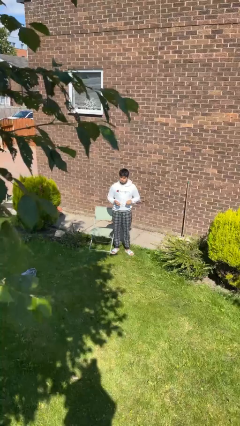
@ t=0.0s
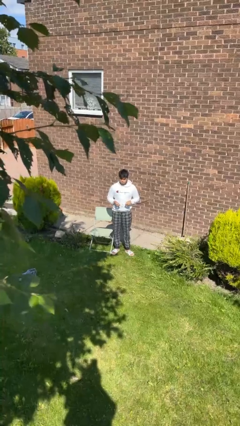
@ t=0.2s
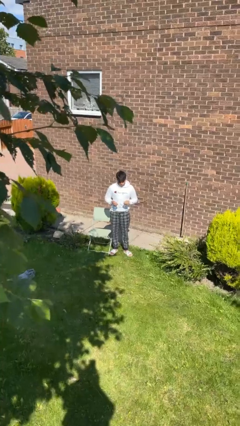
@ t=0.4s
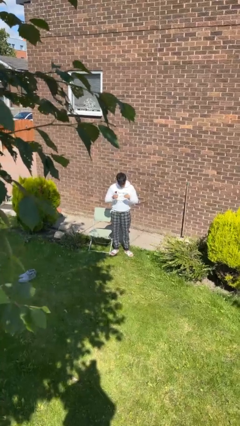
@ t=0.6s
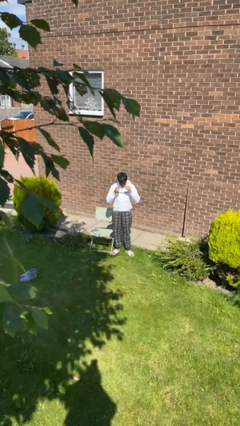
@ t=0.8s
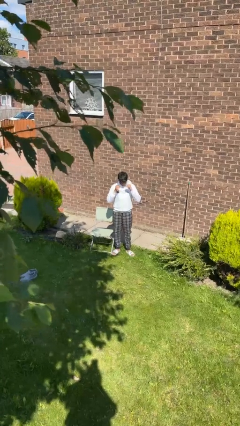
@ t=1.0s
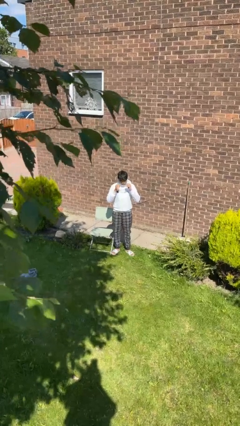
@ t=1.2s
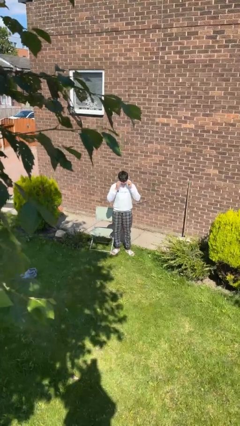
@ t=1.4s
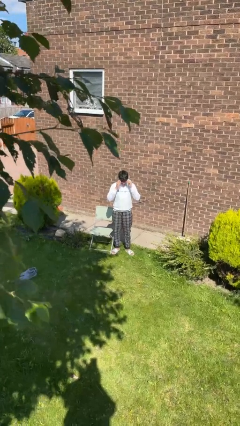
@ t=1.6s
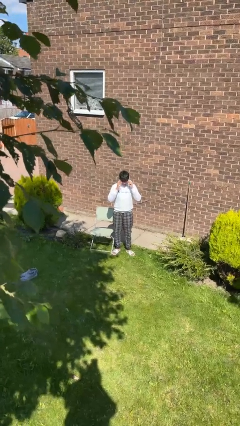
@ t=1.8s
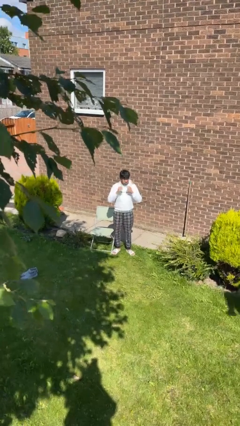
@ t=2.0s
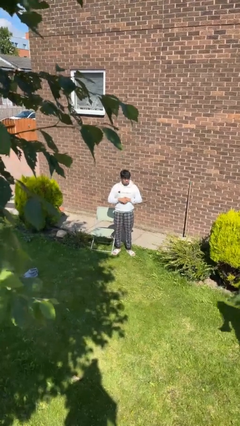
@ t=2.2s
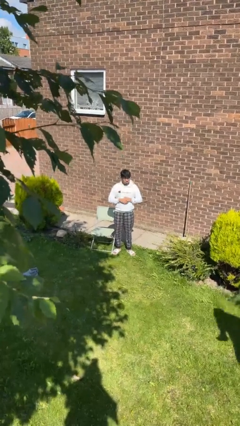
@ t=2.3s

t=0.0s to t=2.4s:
person puts on glasses

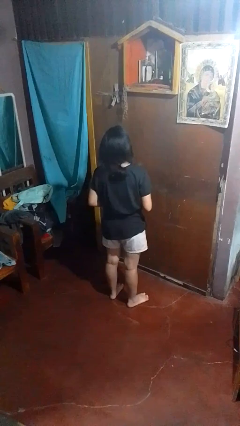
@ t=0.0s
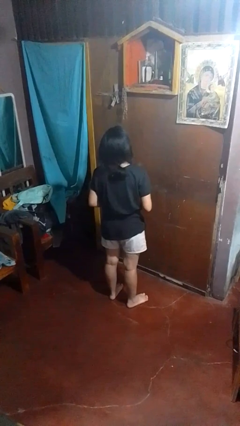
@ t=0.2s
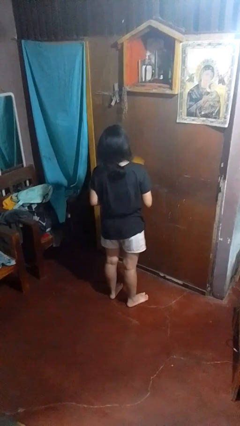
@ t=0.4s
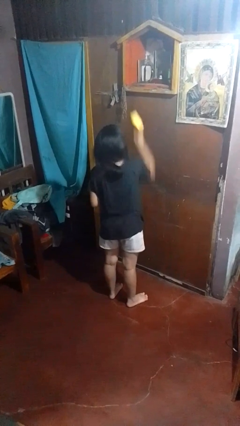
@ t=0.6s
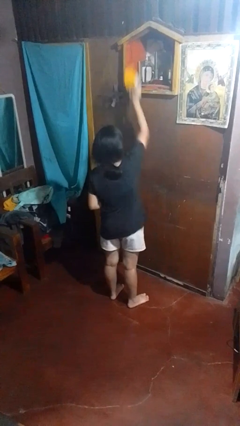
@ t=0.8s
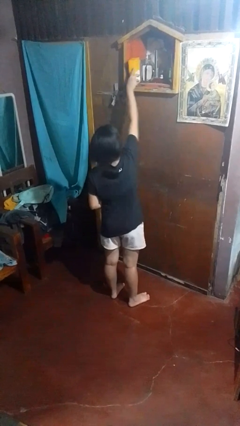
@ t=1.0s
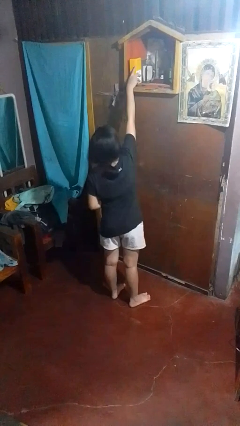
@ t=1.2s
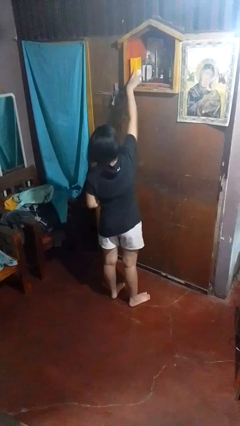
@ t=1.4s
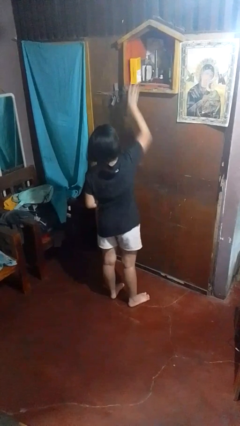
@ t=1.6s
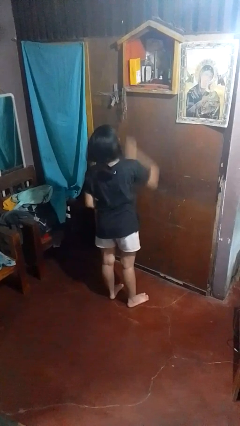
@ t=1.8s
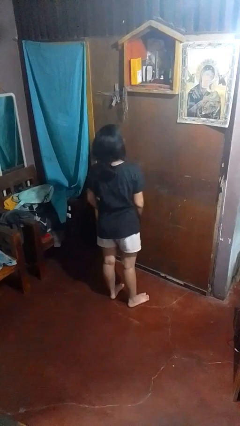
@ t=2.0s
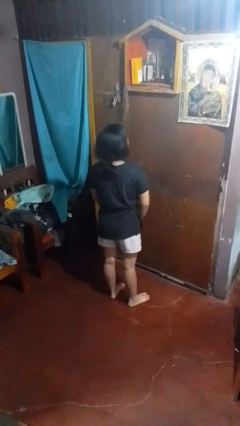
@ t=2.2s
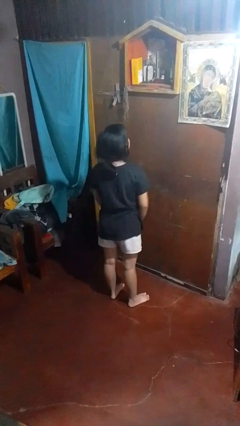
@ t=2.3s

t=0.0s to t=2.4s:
person puts down object on shelf

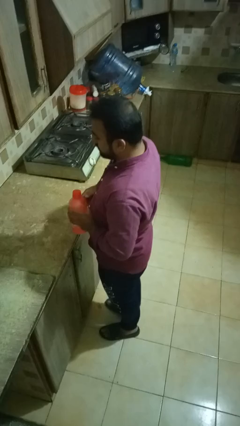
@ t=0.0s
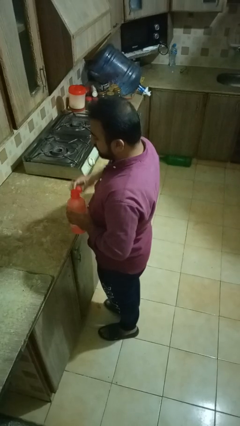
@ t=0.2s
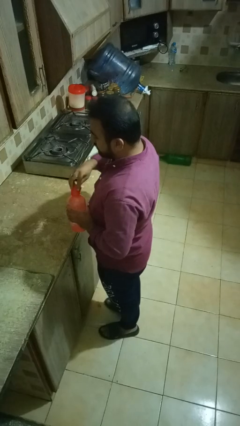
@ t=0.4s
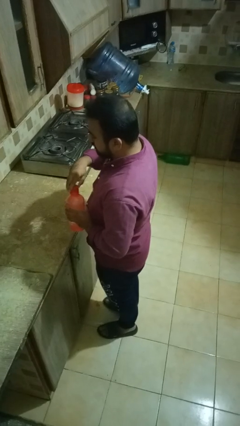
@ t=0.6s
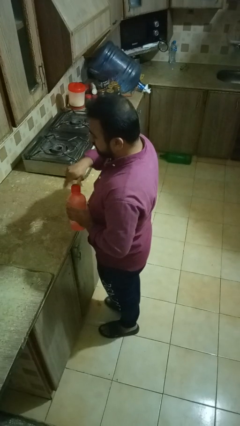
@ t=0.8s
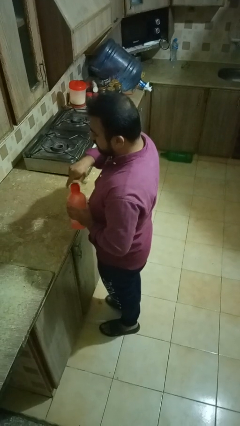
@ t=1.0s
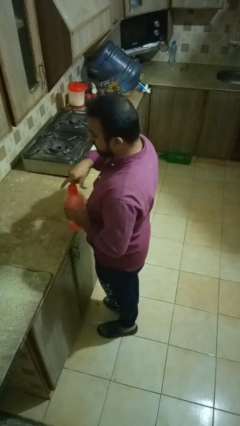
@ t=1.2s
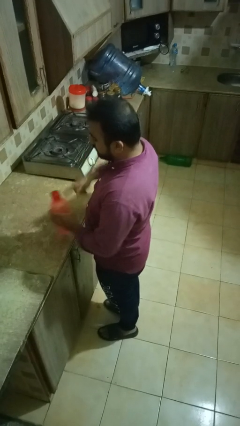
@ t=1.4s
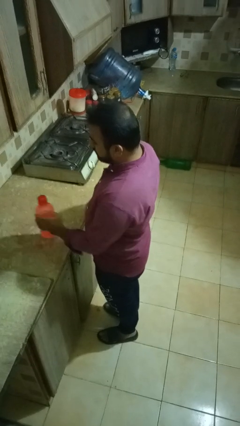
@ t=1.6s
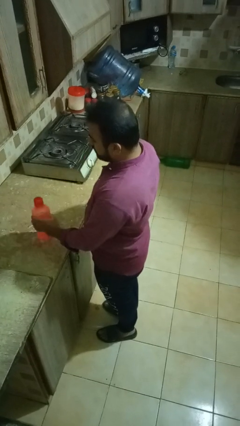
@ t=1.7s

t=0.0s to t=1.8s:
person screws lid to bottle

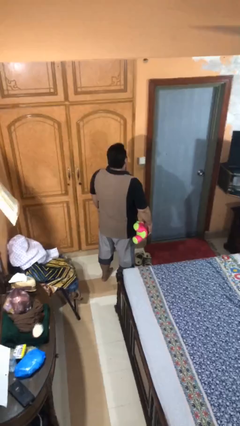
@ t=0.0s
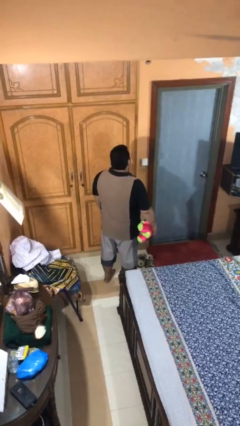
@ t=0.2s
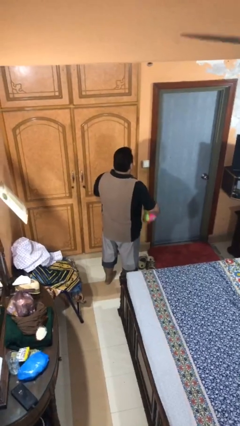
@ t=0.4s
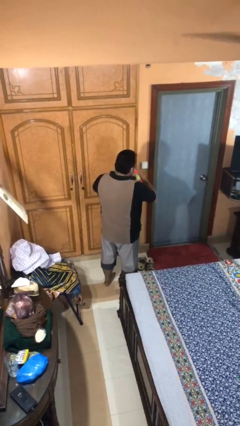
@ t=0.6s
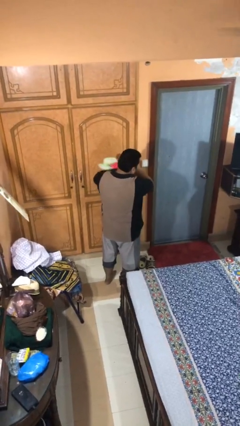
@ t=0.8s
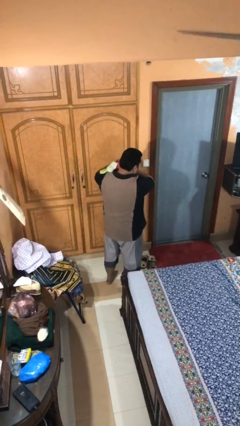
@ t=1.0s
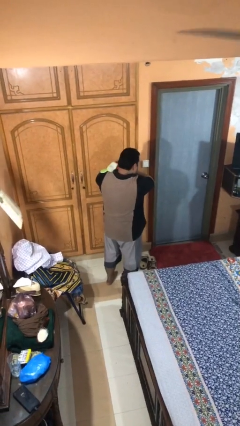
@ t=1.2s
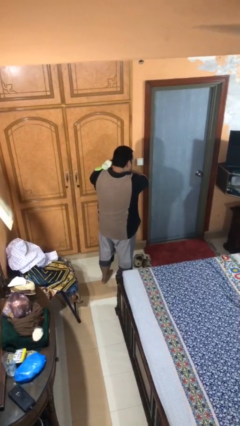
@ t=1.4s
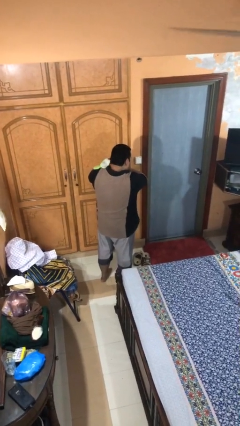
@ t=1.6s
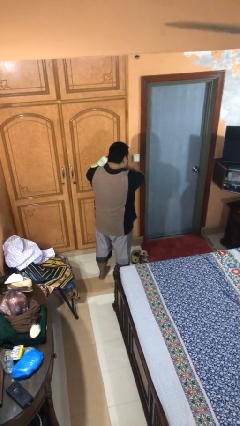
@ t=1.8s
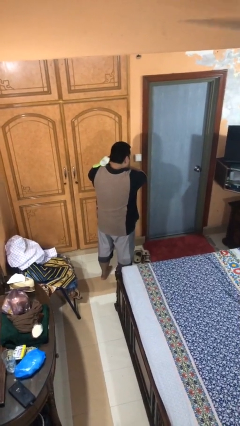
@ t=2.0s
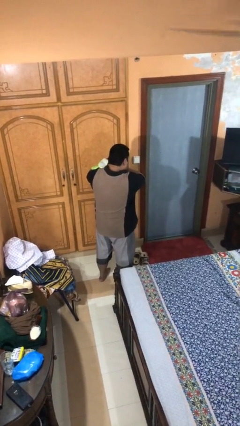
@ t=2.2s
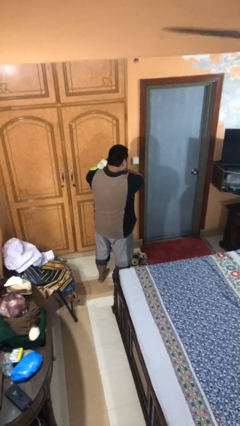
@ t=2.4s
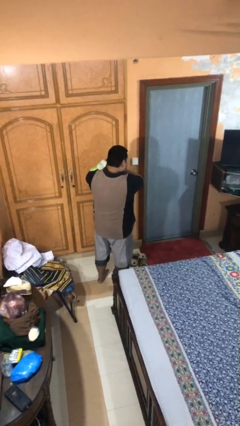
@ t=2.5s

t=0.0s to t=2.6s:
person hugs stuffed animal

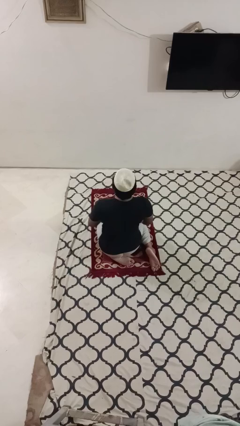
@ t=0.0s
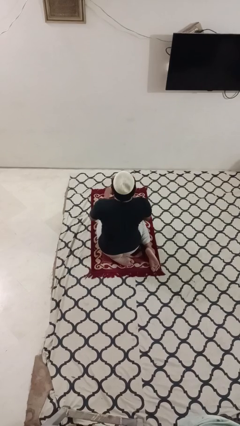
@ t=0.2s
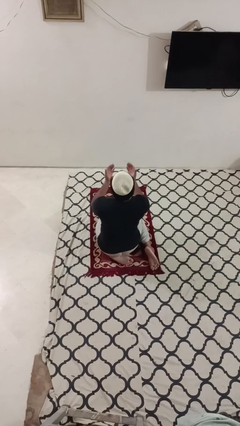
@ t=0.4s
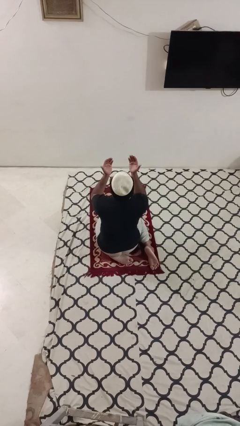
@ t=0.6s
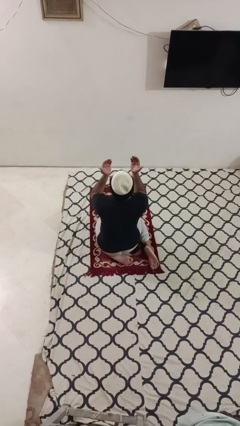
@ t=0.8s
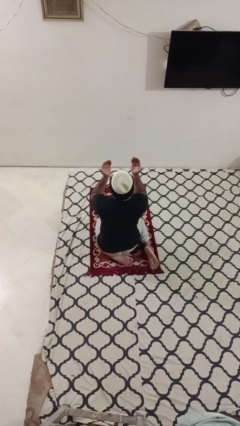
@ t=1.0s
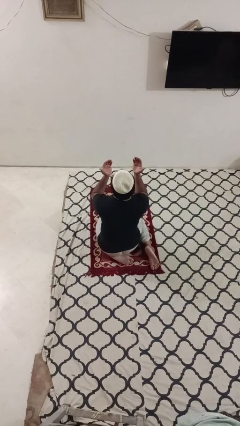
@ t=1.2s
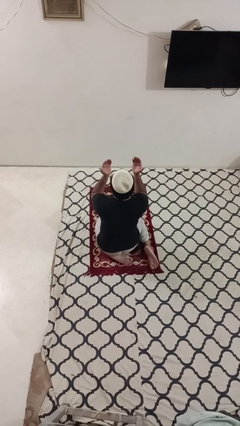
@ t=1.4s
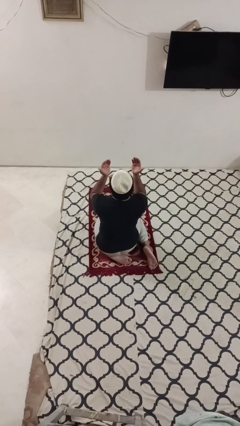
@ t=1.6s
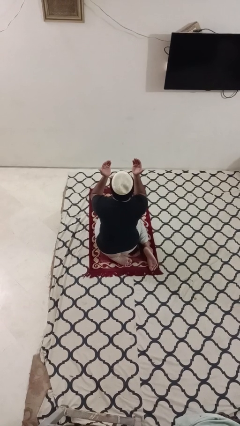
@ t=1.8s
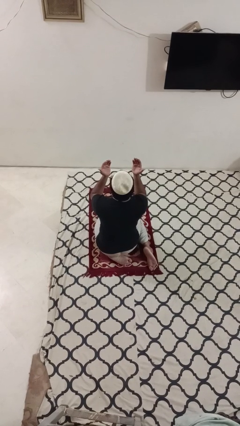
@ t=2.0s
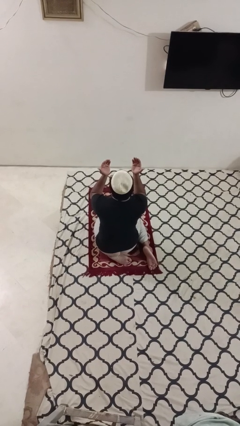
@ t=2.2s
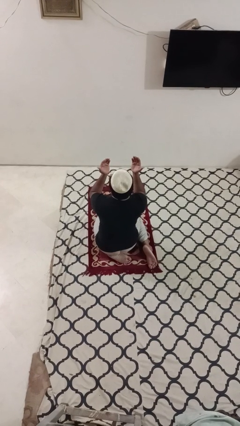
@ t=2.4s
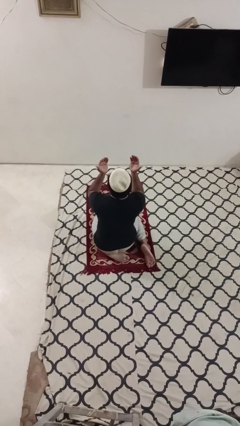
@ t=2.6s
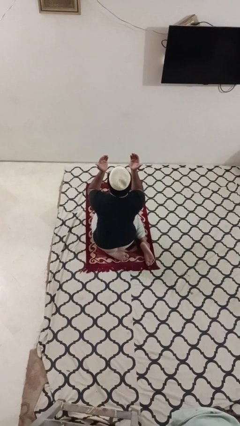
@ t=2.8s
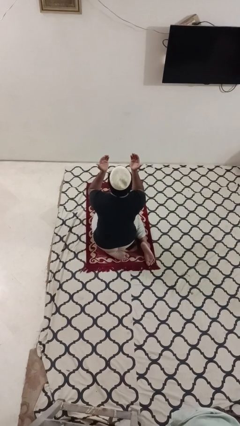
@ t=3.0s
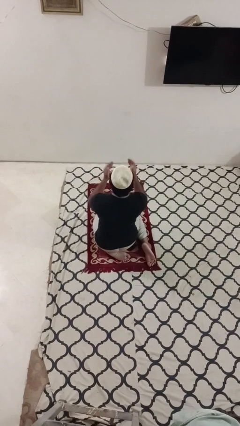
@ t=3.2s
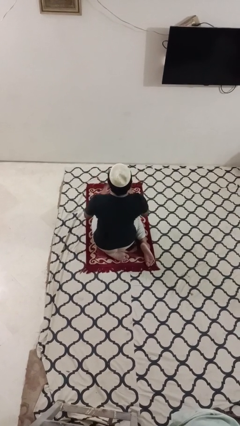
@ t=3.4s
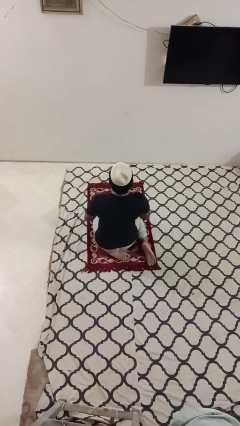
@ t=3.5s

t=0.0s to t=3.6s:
person prays

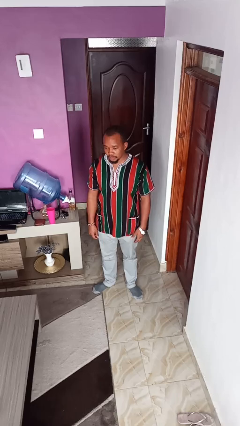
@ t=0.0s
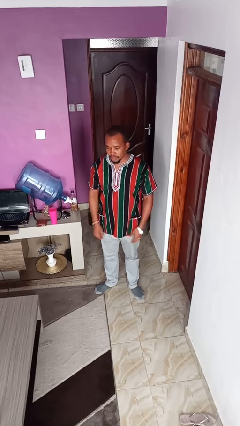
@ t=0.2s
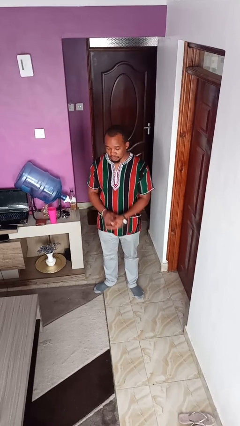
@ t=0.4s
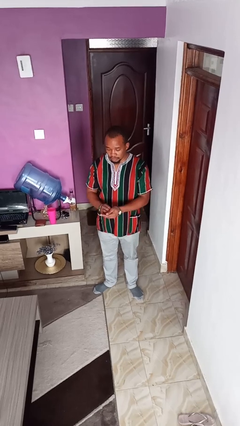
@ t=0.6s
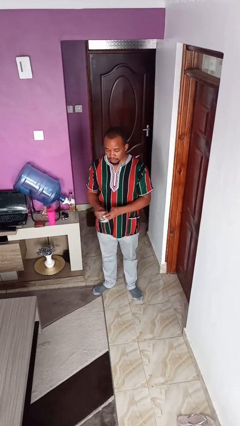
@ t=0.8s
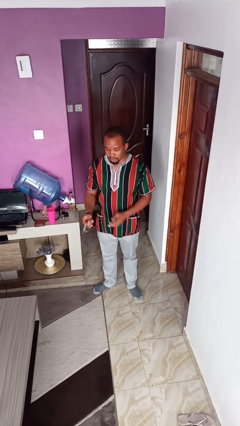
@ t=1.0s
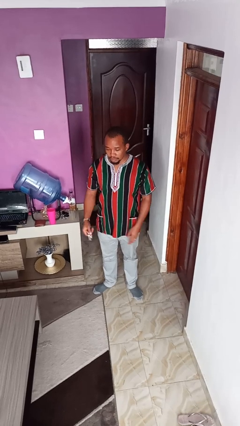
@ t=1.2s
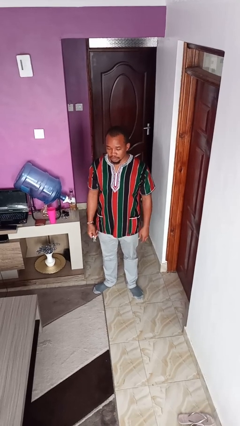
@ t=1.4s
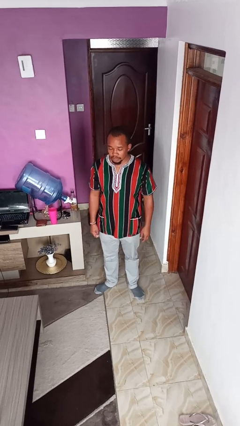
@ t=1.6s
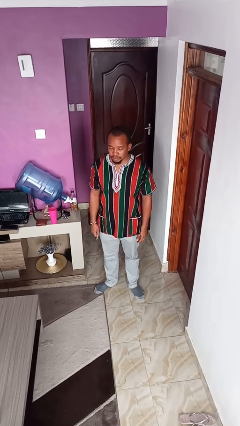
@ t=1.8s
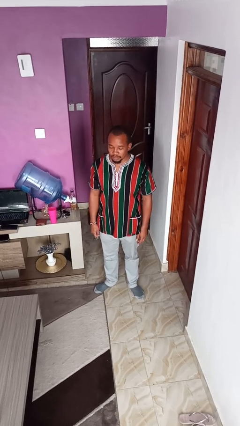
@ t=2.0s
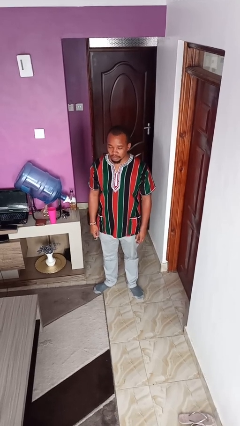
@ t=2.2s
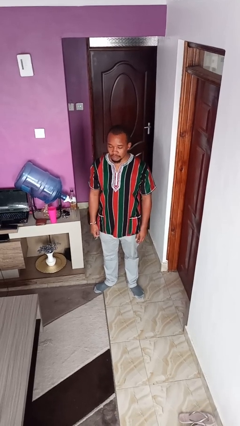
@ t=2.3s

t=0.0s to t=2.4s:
person takes off wristwatch

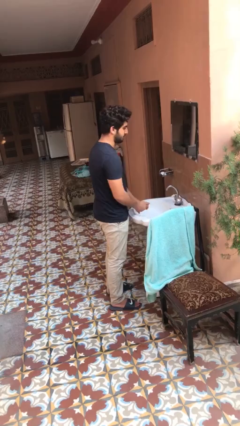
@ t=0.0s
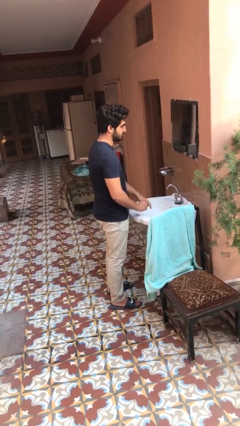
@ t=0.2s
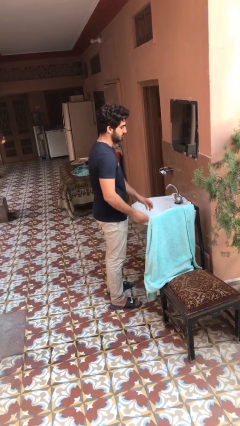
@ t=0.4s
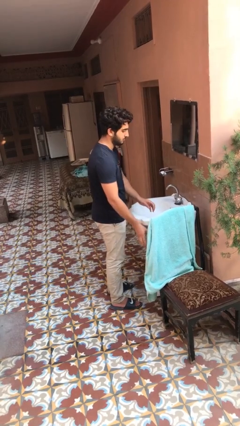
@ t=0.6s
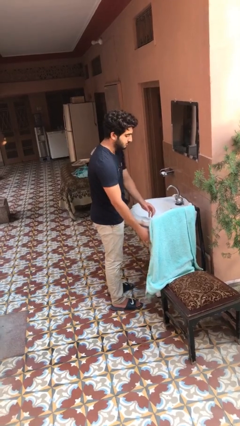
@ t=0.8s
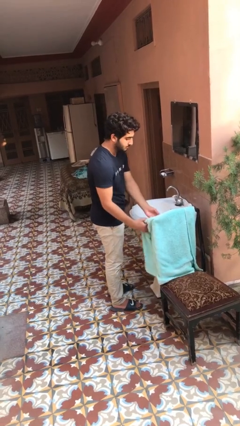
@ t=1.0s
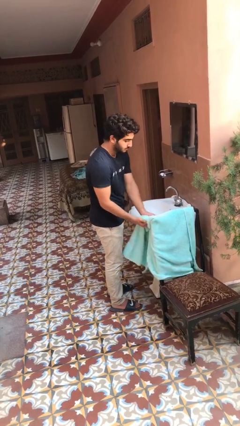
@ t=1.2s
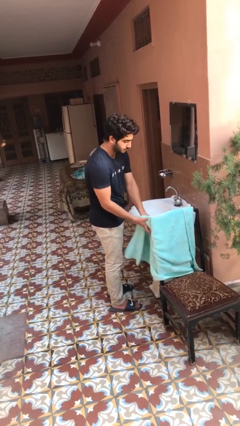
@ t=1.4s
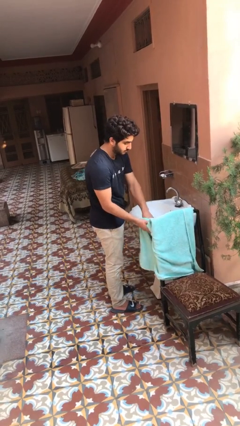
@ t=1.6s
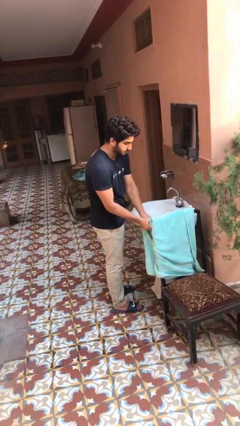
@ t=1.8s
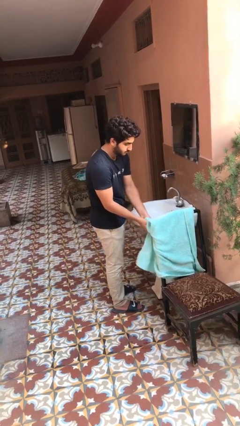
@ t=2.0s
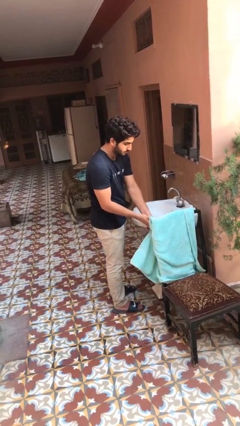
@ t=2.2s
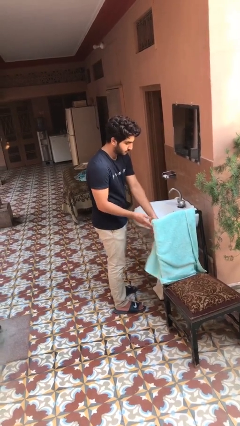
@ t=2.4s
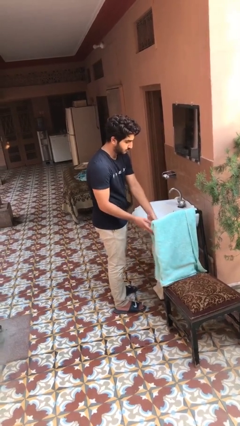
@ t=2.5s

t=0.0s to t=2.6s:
person dries hands with towel
